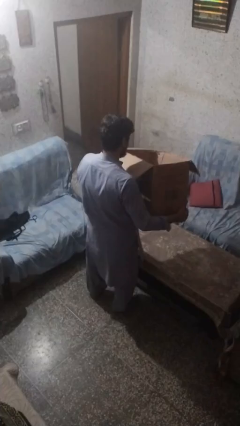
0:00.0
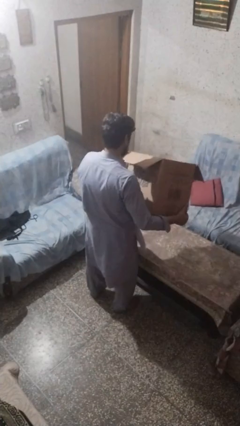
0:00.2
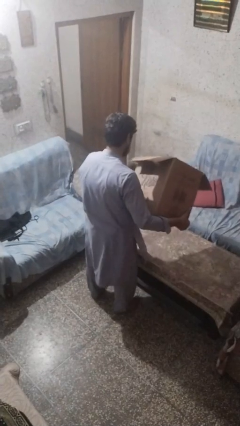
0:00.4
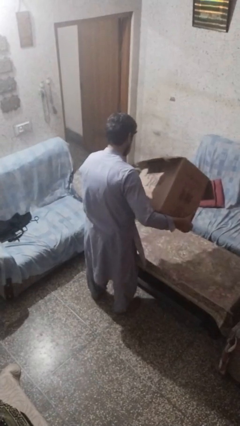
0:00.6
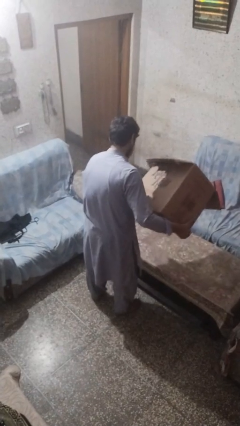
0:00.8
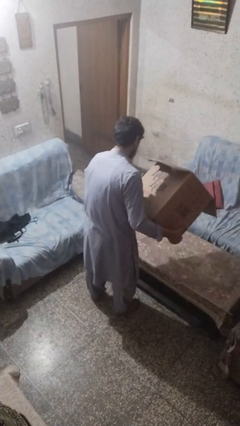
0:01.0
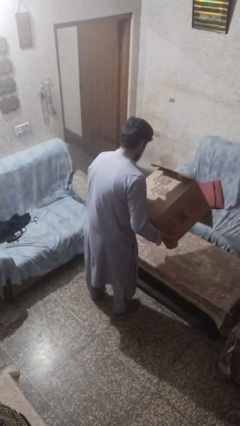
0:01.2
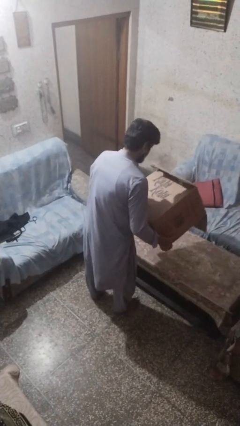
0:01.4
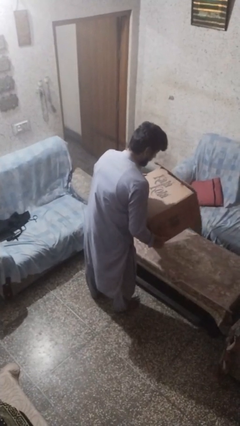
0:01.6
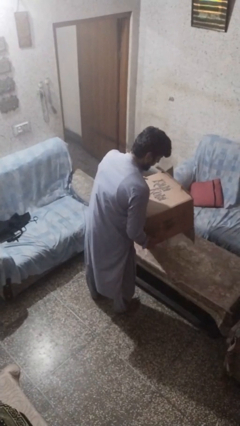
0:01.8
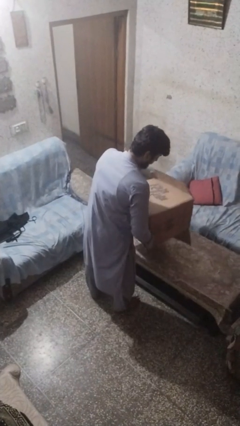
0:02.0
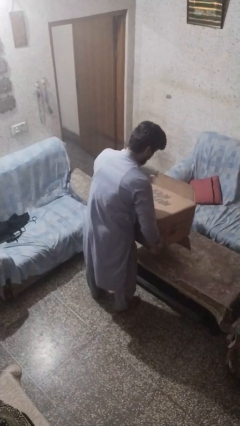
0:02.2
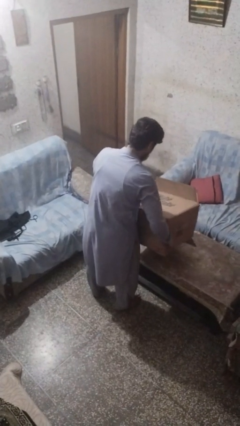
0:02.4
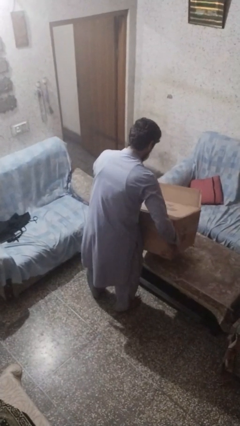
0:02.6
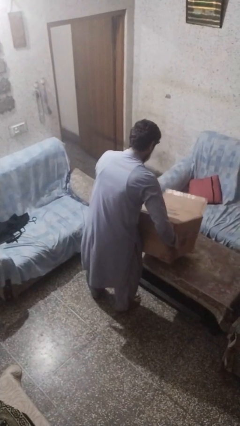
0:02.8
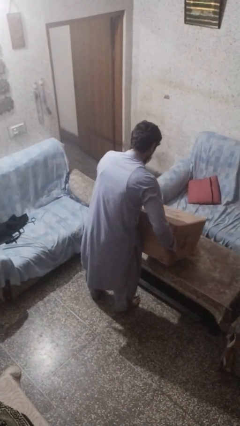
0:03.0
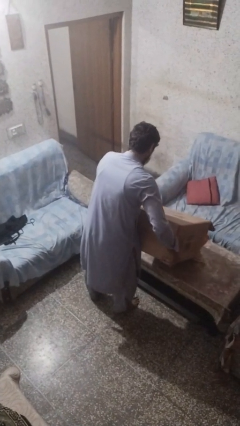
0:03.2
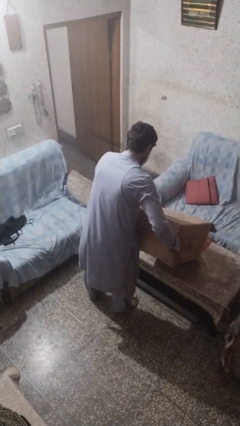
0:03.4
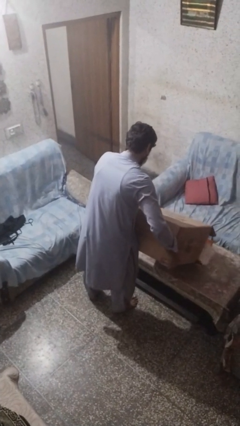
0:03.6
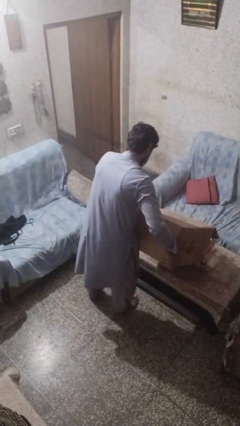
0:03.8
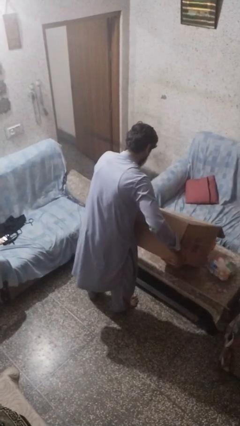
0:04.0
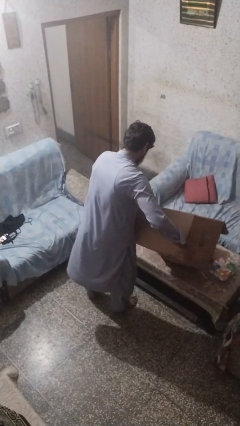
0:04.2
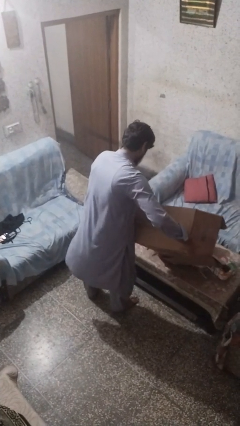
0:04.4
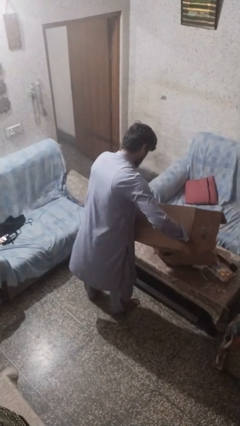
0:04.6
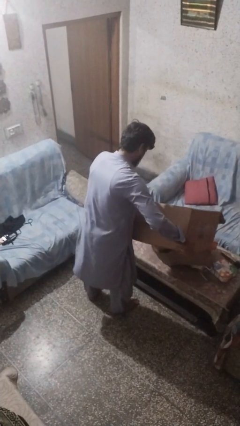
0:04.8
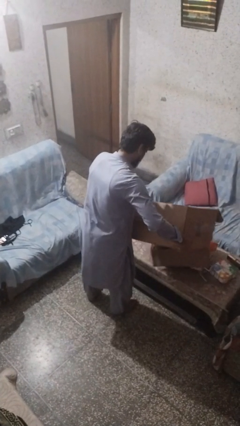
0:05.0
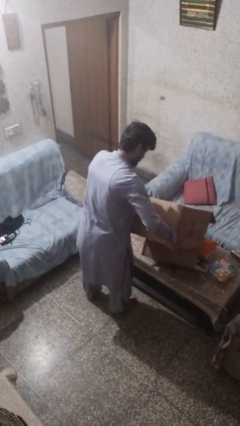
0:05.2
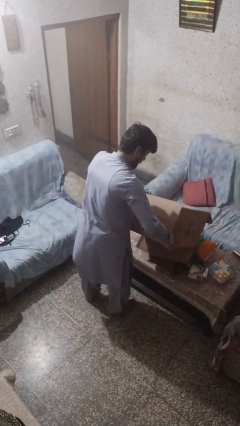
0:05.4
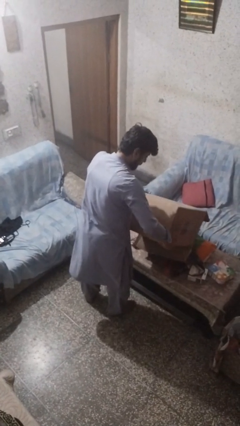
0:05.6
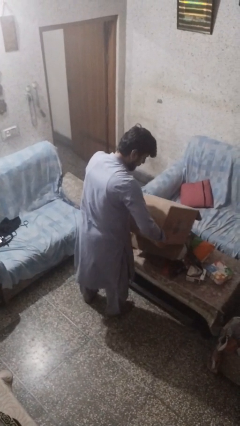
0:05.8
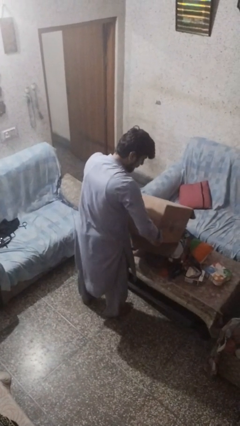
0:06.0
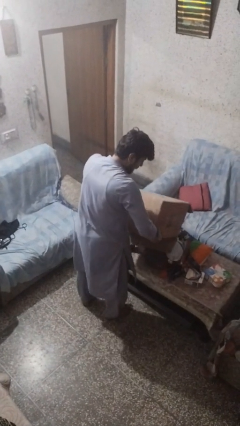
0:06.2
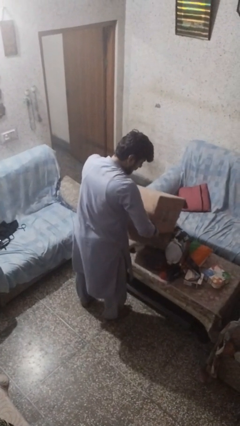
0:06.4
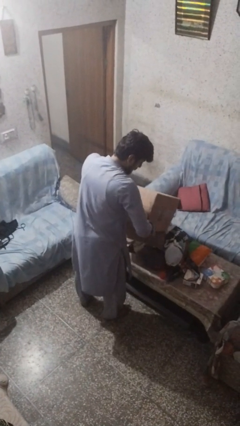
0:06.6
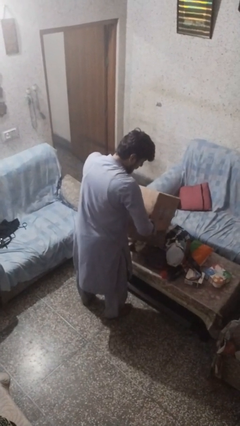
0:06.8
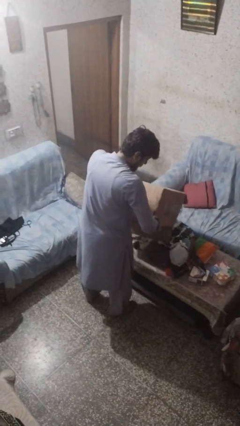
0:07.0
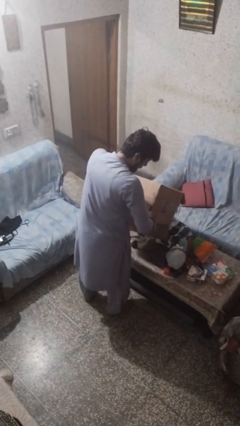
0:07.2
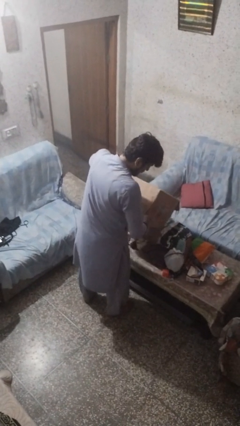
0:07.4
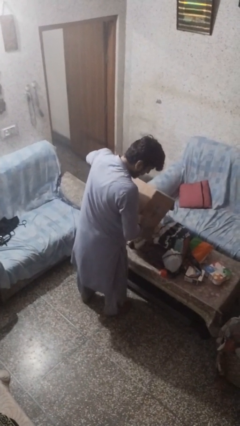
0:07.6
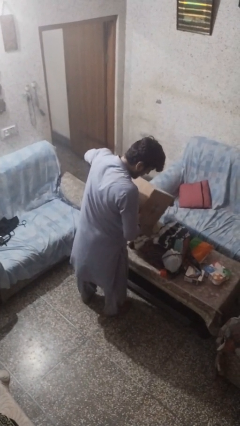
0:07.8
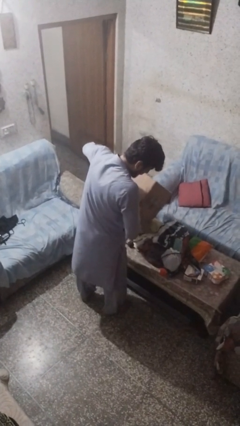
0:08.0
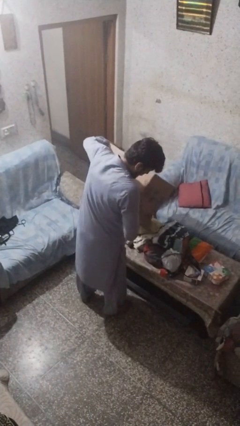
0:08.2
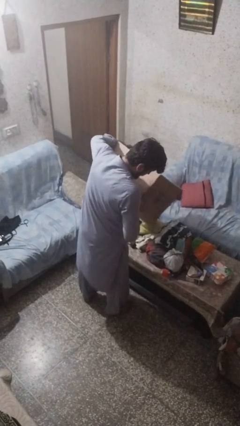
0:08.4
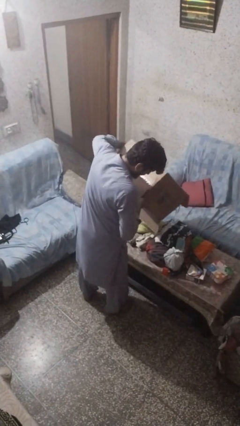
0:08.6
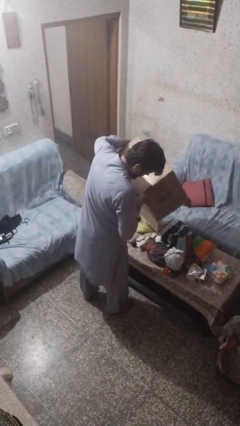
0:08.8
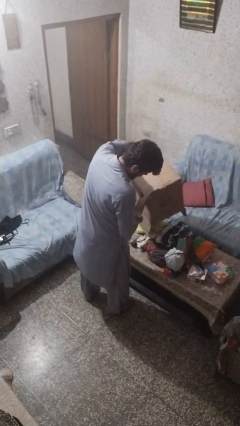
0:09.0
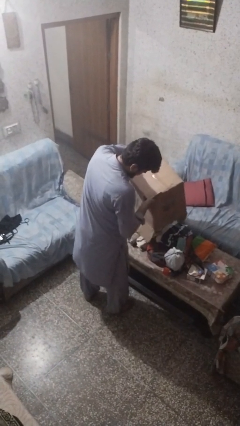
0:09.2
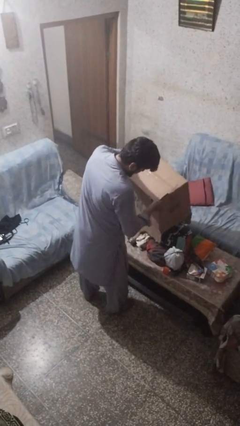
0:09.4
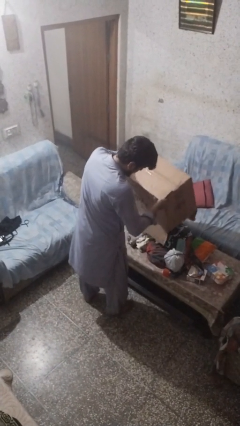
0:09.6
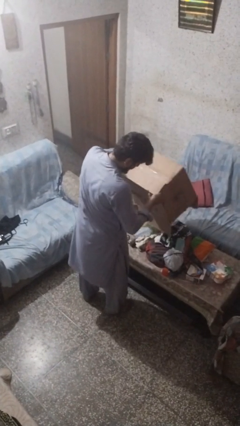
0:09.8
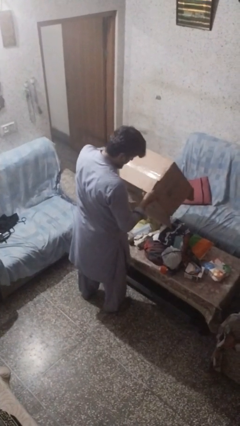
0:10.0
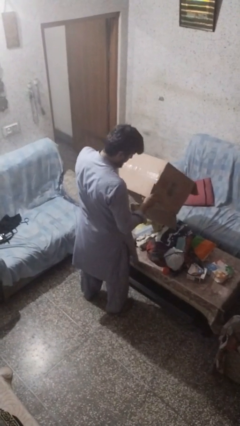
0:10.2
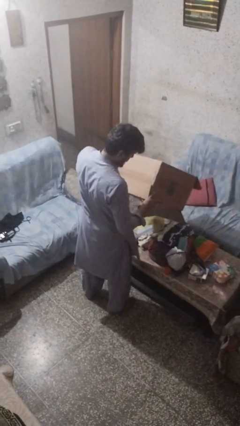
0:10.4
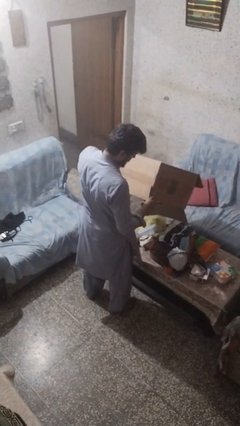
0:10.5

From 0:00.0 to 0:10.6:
person unloads box onto table

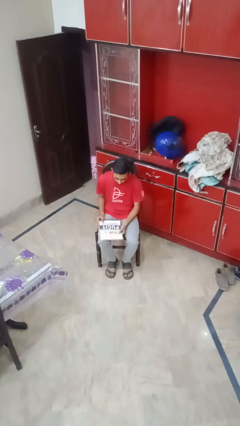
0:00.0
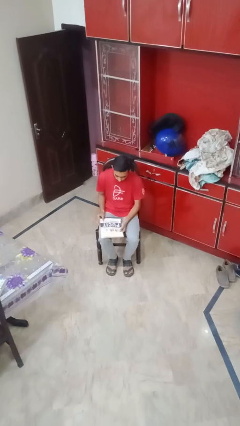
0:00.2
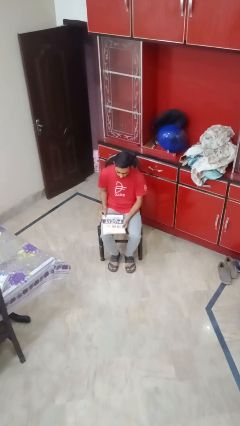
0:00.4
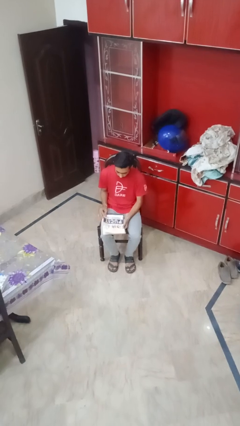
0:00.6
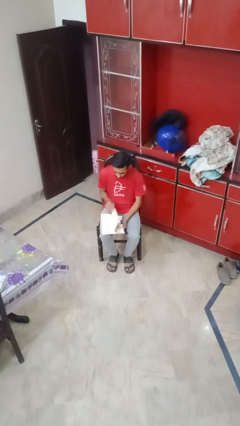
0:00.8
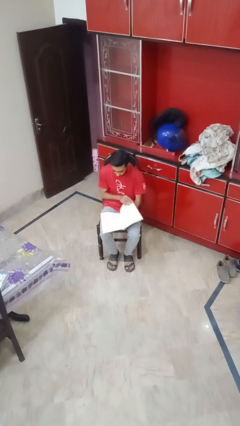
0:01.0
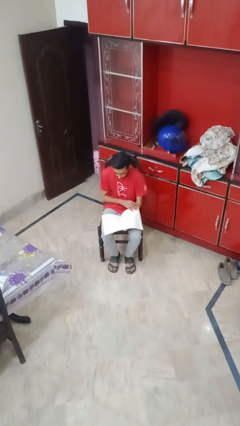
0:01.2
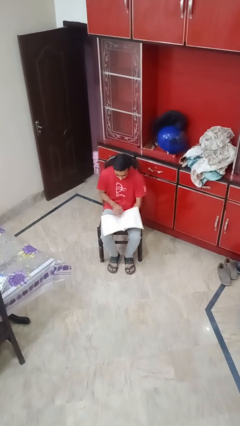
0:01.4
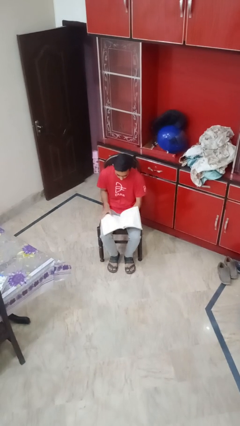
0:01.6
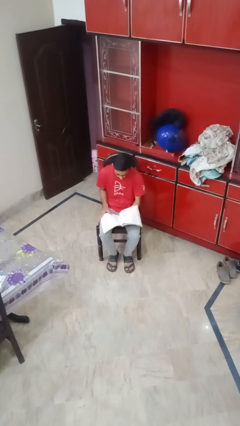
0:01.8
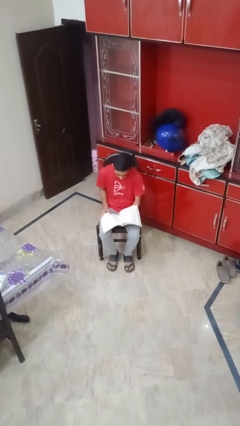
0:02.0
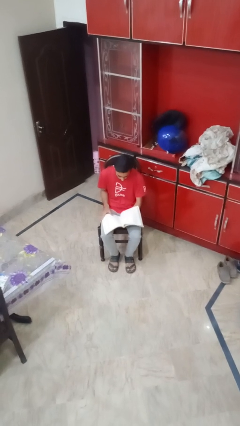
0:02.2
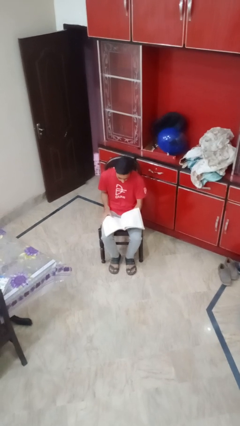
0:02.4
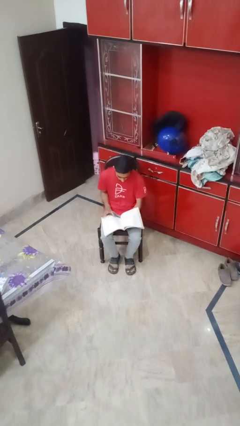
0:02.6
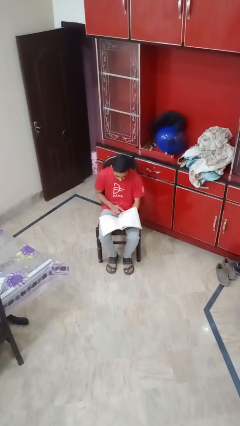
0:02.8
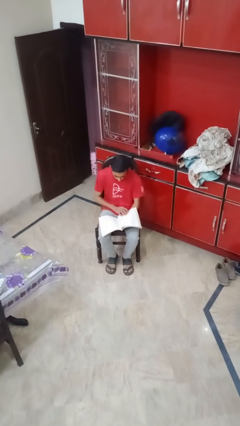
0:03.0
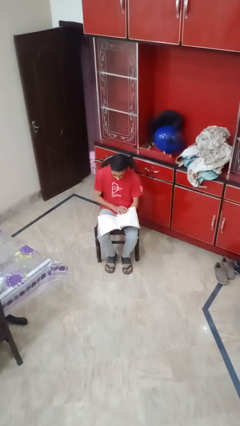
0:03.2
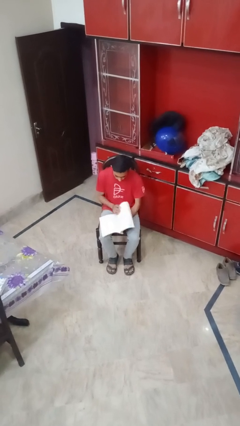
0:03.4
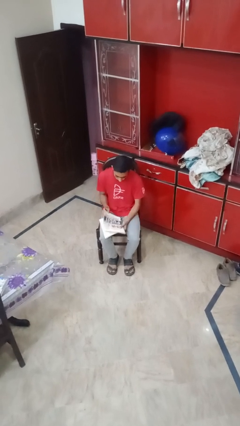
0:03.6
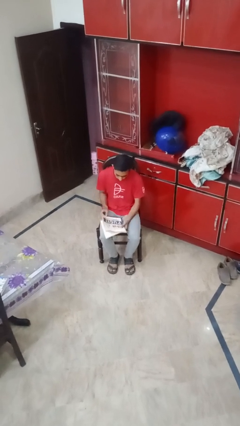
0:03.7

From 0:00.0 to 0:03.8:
person reads magazine

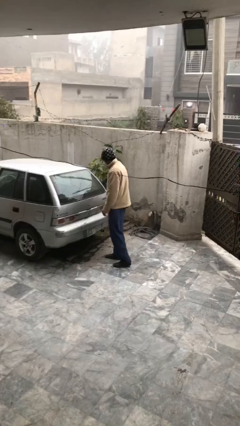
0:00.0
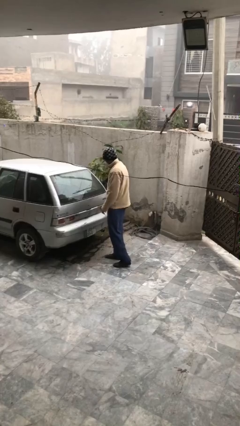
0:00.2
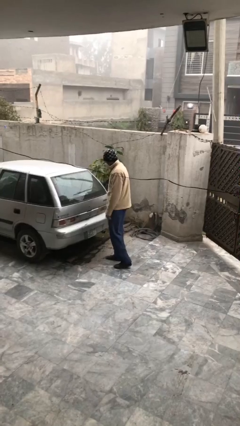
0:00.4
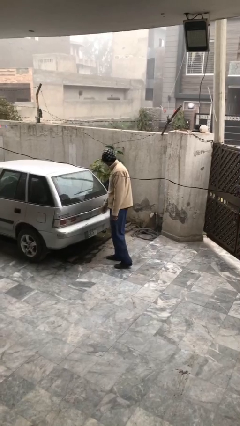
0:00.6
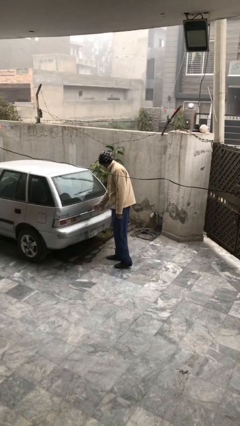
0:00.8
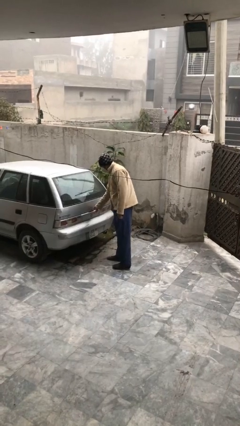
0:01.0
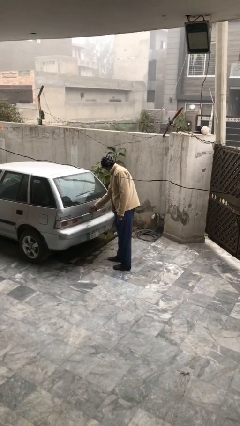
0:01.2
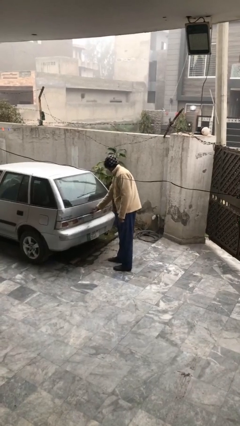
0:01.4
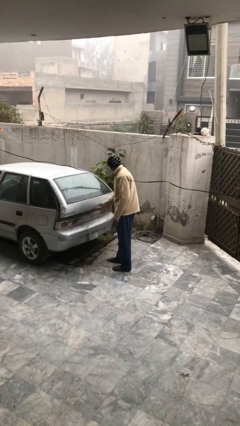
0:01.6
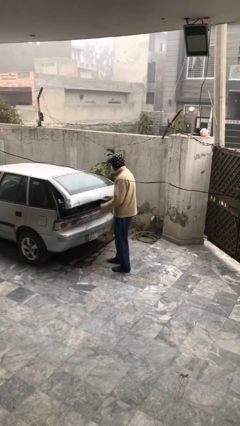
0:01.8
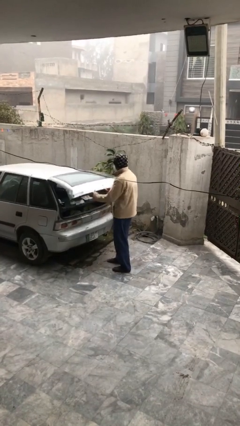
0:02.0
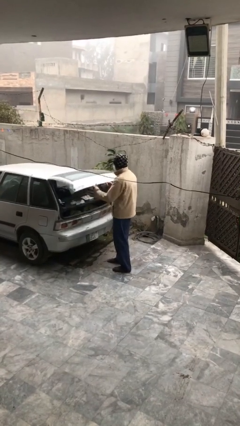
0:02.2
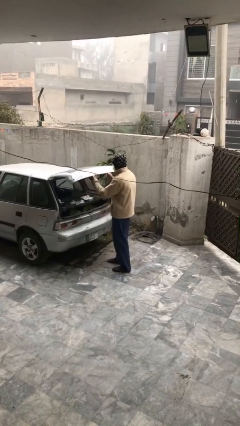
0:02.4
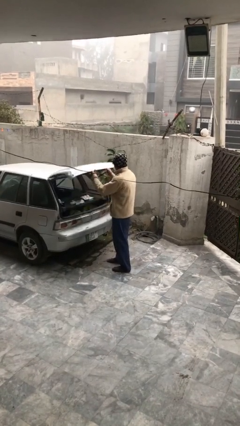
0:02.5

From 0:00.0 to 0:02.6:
person opens car trunk

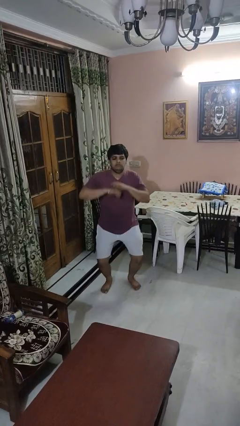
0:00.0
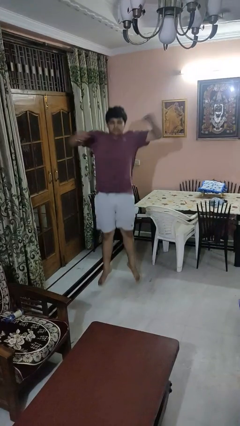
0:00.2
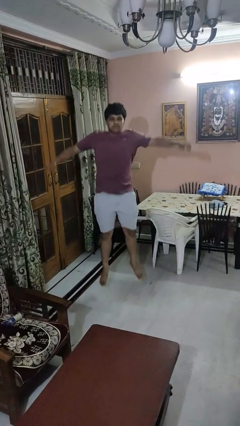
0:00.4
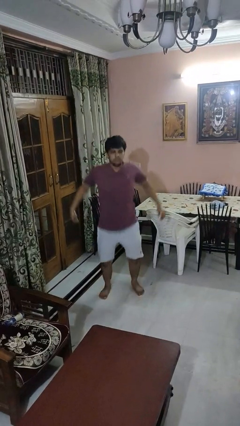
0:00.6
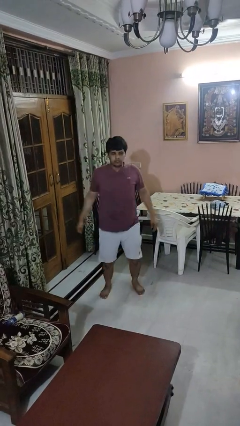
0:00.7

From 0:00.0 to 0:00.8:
person jumps
